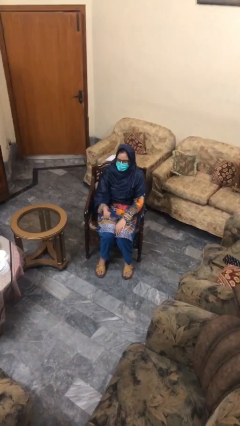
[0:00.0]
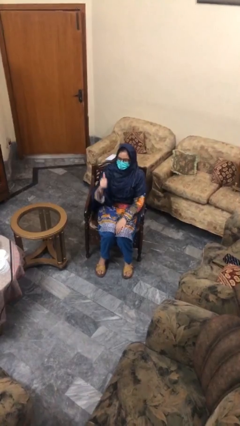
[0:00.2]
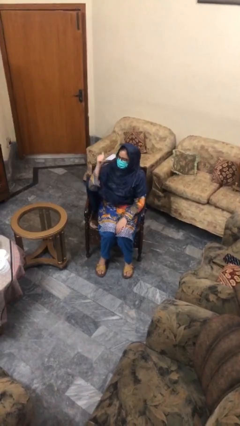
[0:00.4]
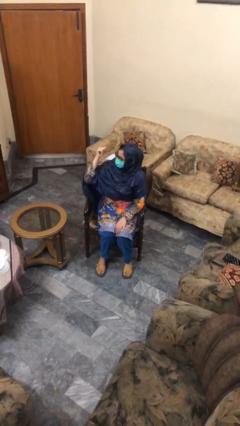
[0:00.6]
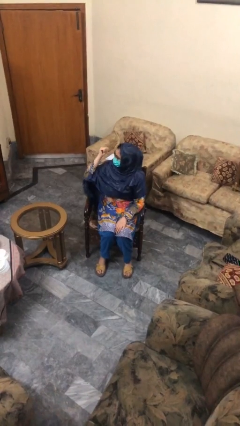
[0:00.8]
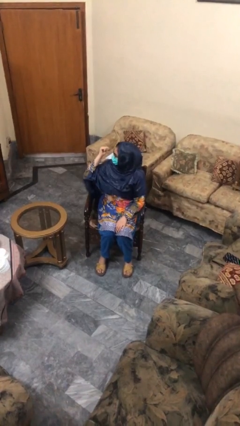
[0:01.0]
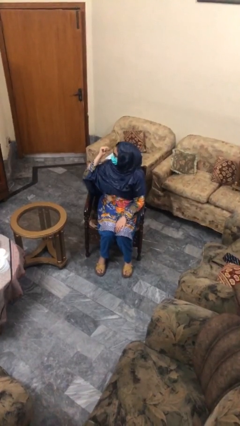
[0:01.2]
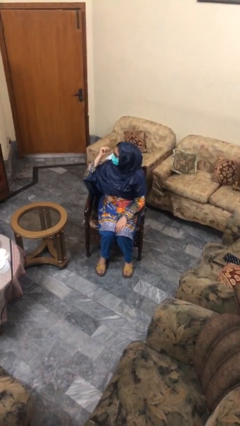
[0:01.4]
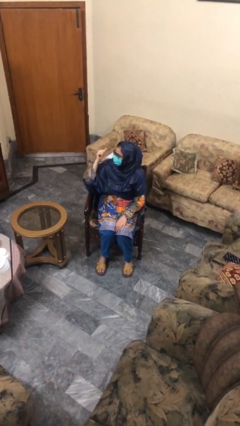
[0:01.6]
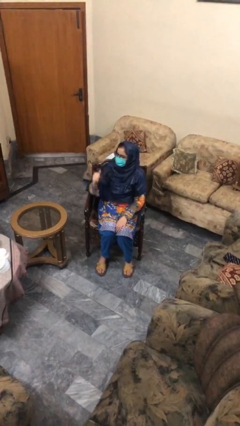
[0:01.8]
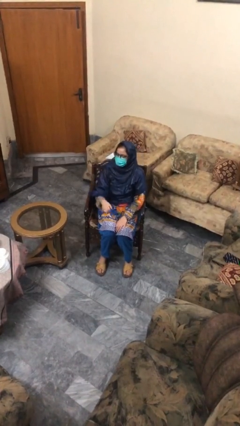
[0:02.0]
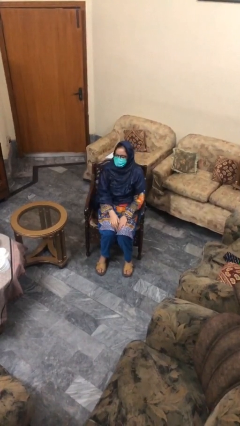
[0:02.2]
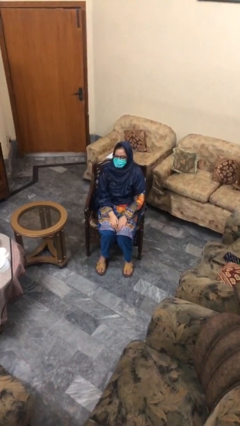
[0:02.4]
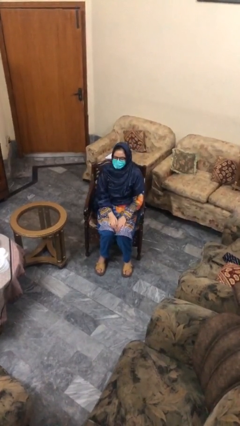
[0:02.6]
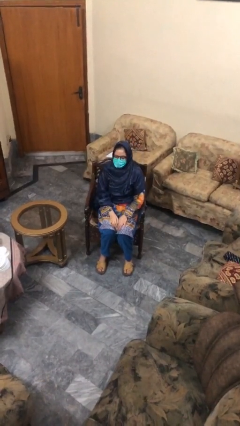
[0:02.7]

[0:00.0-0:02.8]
person gestures behind me

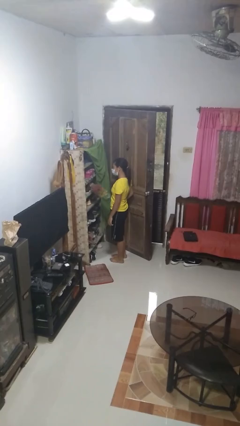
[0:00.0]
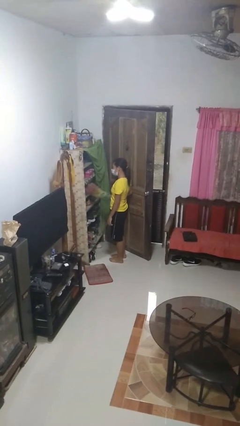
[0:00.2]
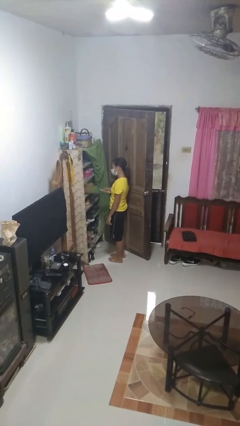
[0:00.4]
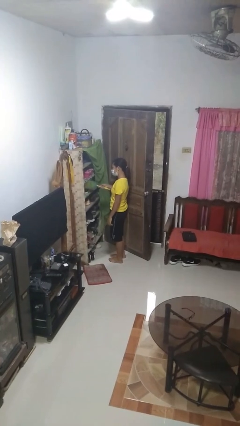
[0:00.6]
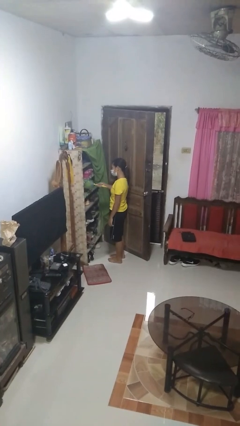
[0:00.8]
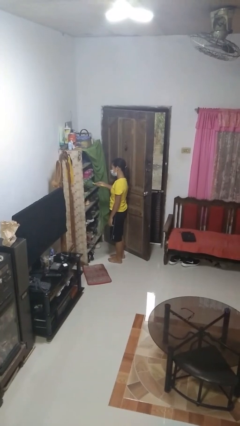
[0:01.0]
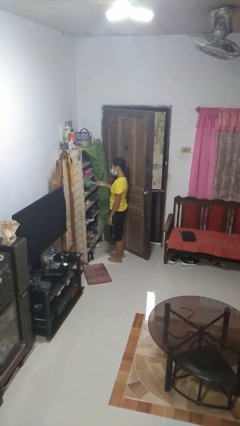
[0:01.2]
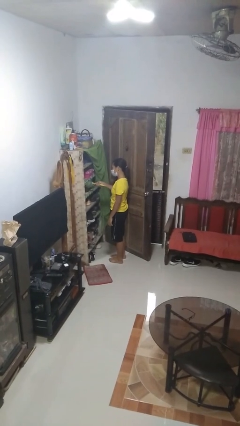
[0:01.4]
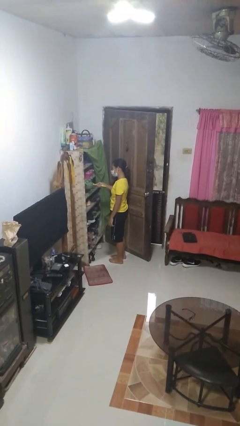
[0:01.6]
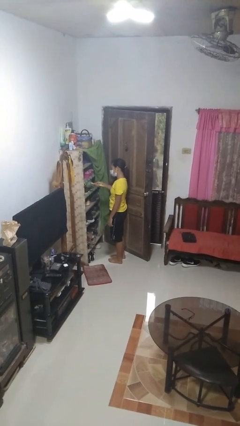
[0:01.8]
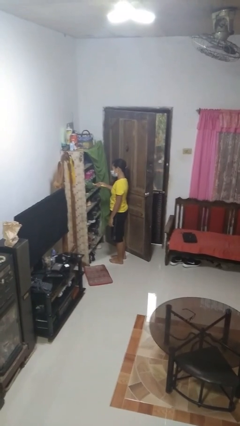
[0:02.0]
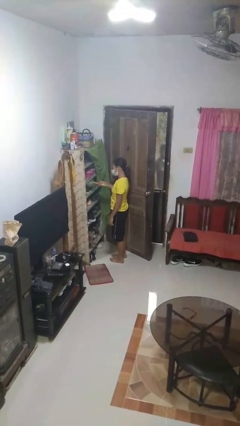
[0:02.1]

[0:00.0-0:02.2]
person dusts furniture

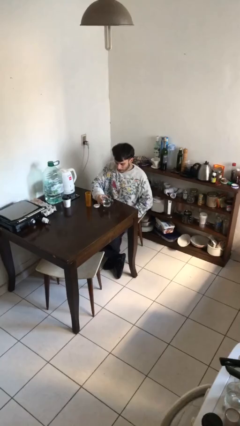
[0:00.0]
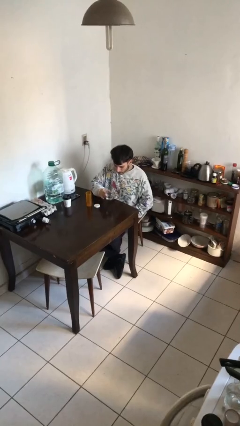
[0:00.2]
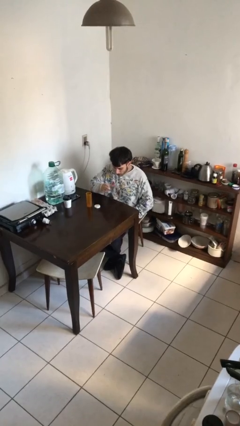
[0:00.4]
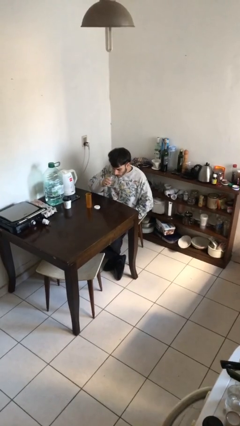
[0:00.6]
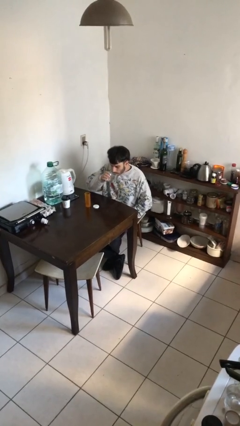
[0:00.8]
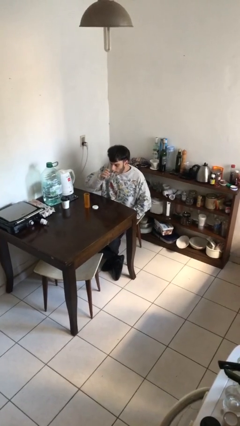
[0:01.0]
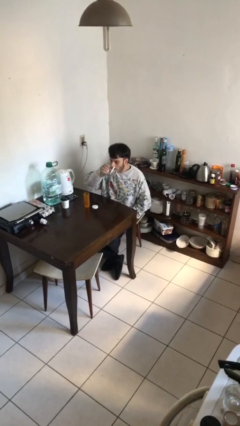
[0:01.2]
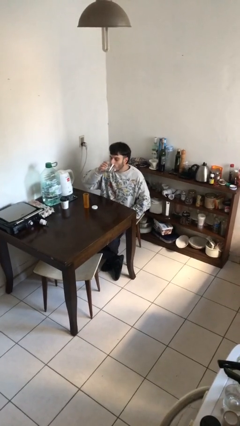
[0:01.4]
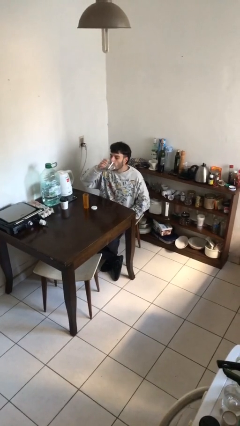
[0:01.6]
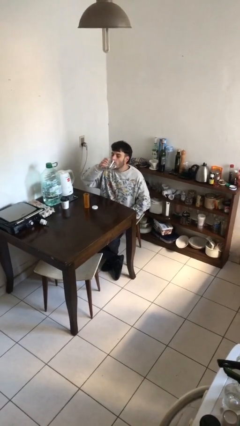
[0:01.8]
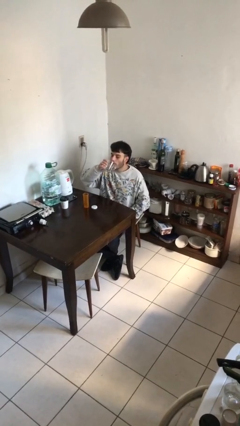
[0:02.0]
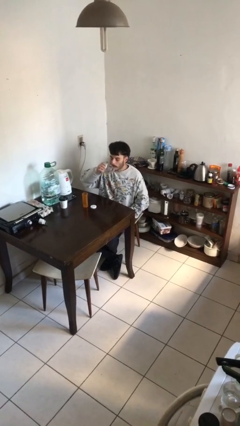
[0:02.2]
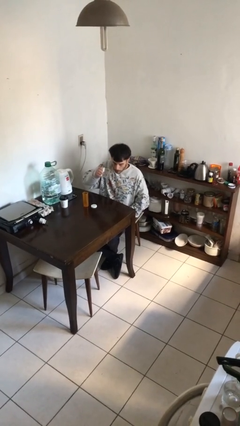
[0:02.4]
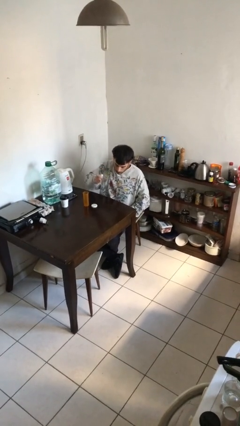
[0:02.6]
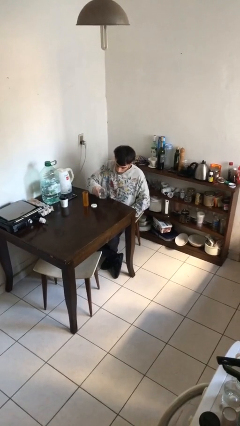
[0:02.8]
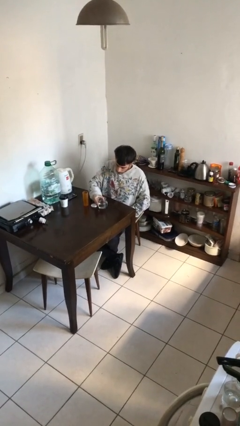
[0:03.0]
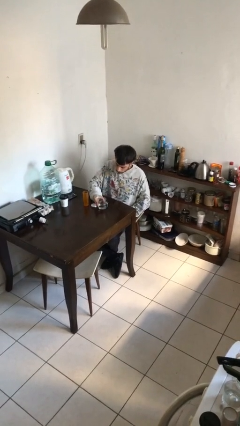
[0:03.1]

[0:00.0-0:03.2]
person drinks from cup

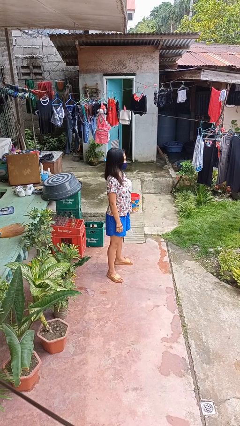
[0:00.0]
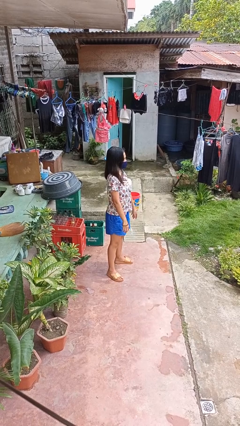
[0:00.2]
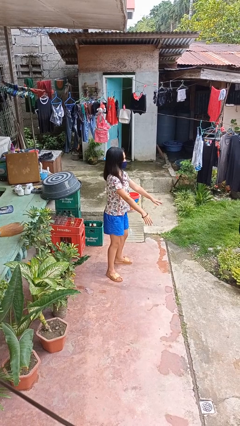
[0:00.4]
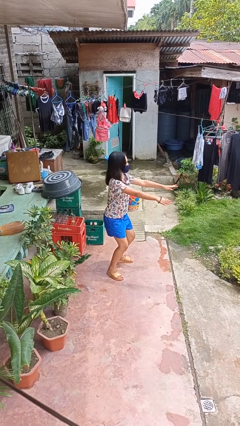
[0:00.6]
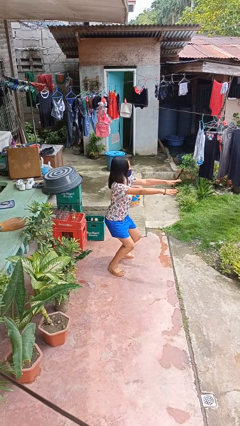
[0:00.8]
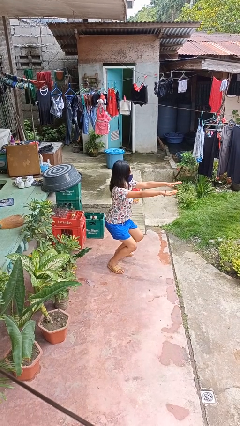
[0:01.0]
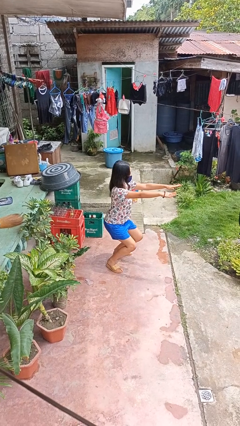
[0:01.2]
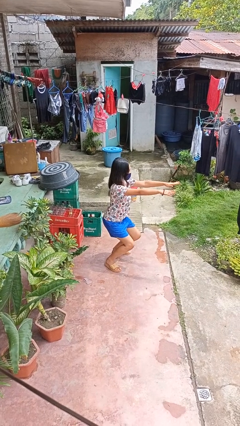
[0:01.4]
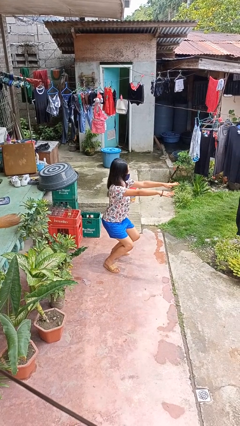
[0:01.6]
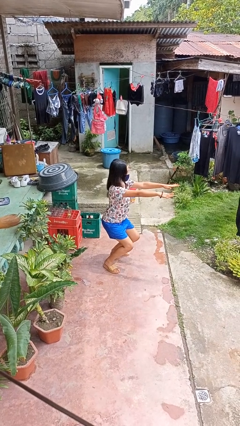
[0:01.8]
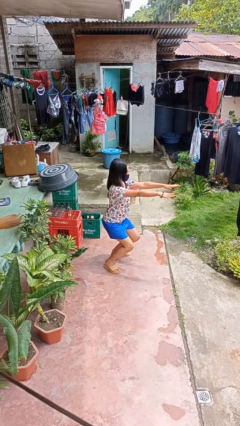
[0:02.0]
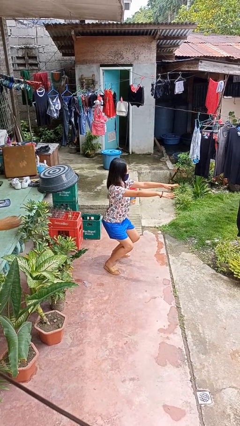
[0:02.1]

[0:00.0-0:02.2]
person squats

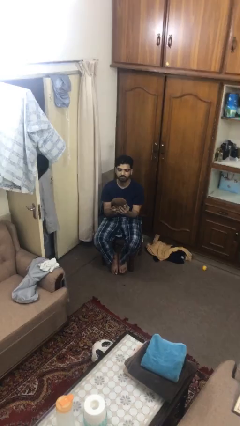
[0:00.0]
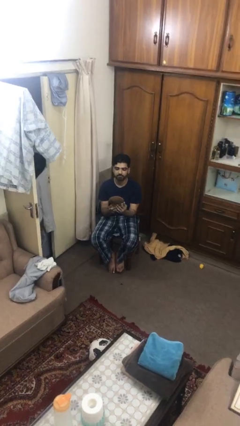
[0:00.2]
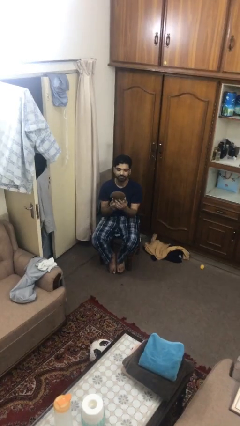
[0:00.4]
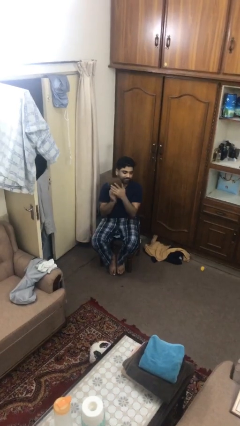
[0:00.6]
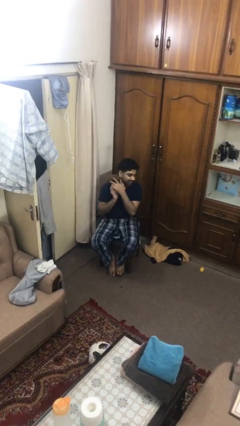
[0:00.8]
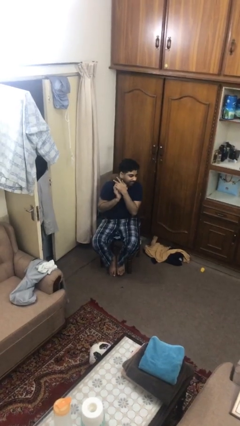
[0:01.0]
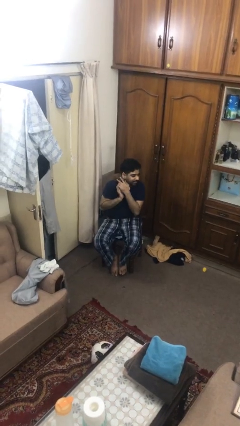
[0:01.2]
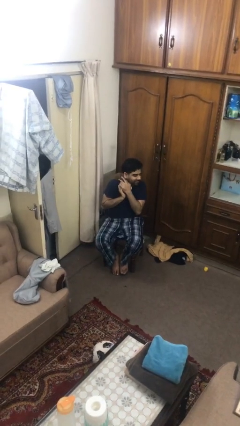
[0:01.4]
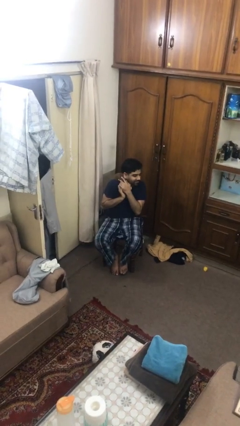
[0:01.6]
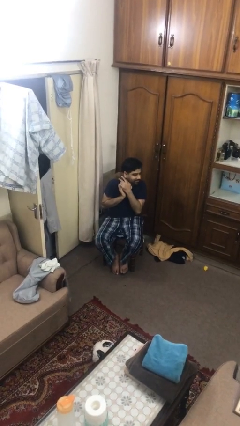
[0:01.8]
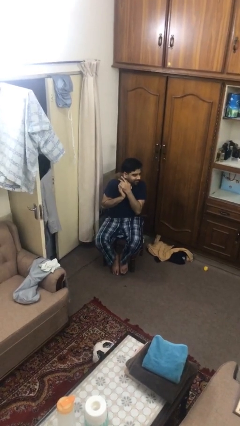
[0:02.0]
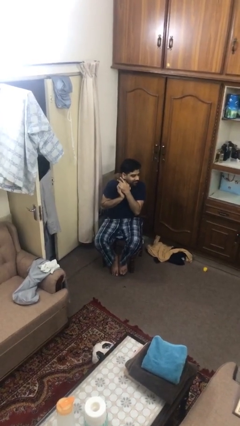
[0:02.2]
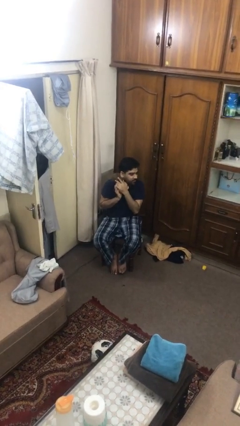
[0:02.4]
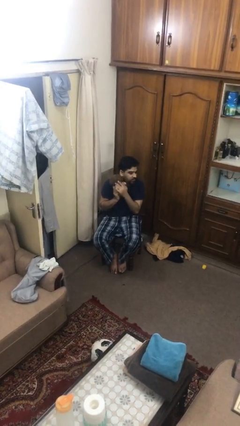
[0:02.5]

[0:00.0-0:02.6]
person hugs stuffed animal

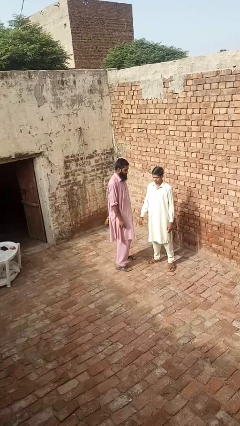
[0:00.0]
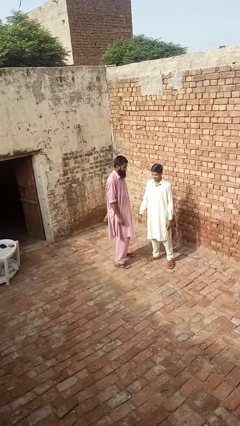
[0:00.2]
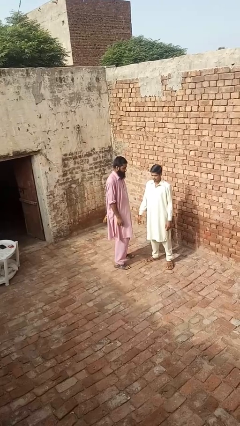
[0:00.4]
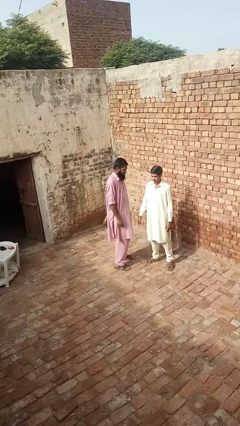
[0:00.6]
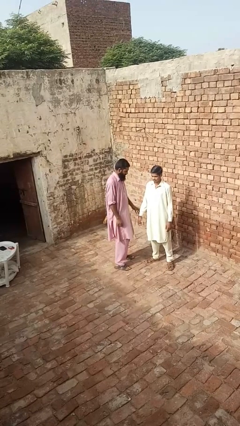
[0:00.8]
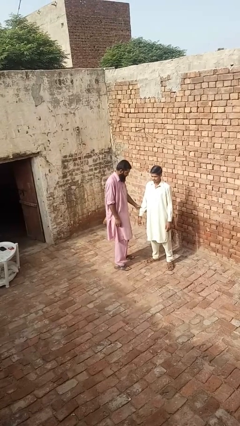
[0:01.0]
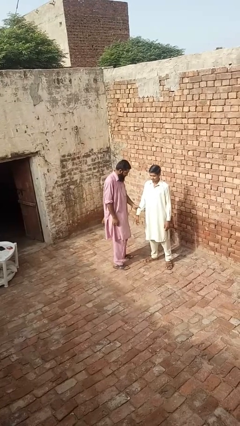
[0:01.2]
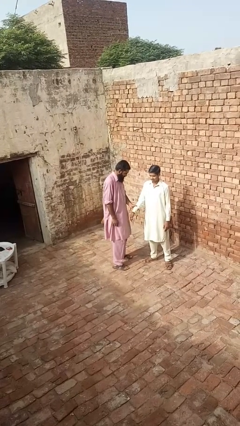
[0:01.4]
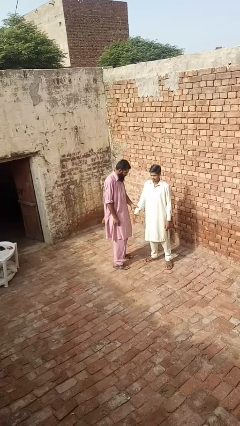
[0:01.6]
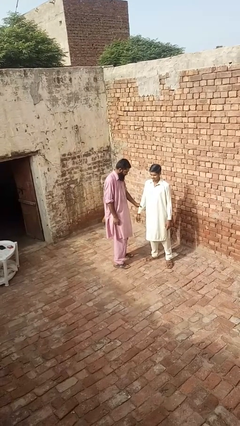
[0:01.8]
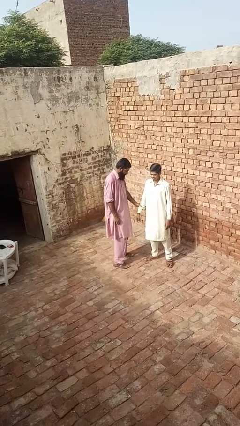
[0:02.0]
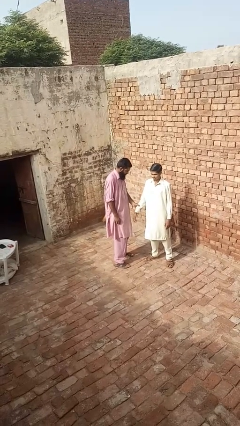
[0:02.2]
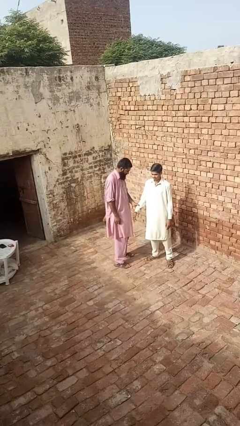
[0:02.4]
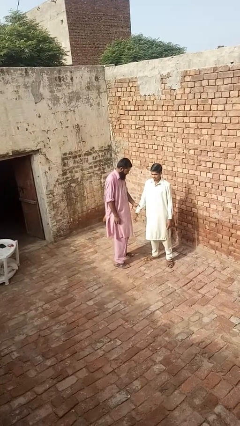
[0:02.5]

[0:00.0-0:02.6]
person grabs person by forearm

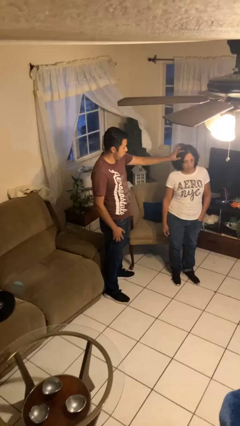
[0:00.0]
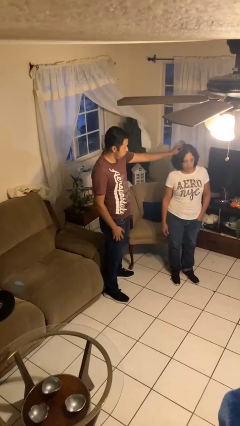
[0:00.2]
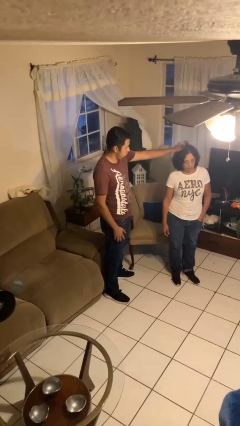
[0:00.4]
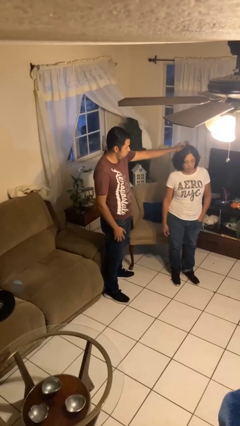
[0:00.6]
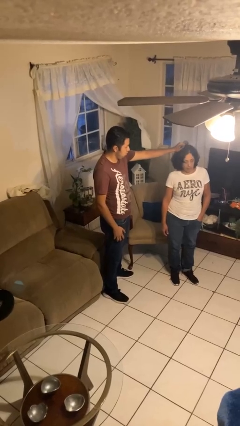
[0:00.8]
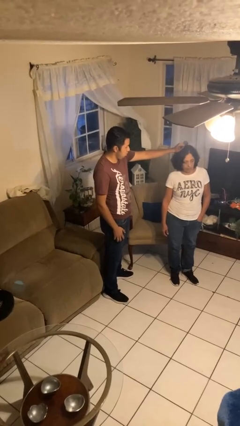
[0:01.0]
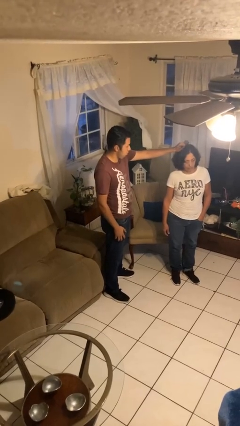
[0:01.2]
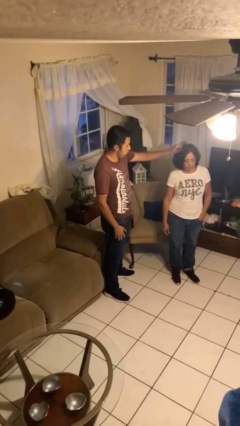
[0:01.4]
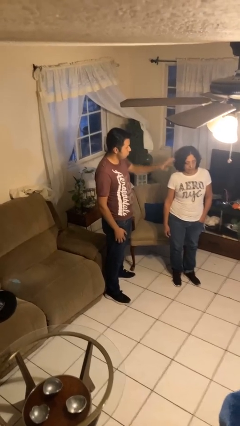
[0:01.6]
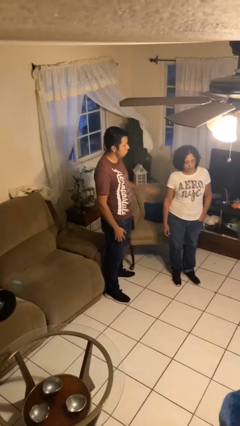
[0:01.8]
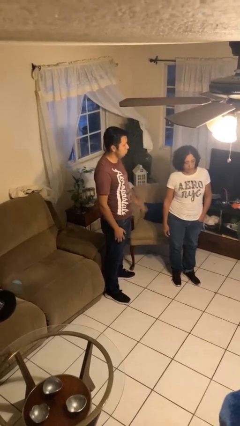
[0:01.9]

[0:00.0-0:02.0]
person grabs person by hair
